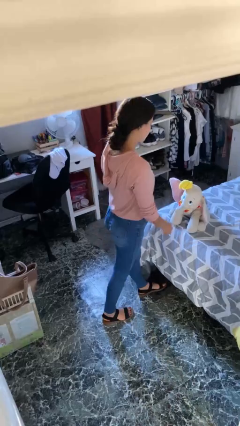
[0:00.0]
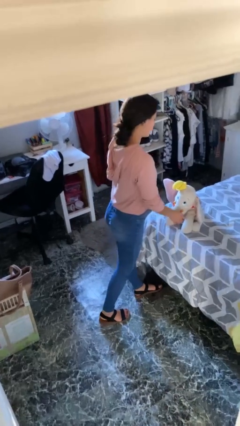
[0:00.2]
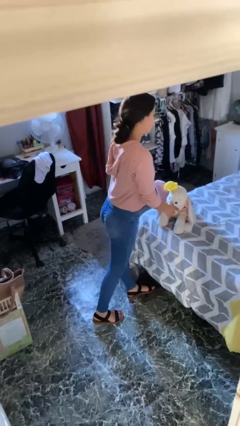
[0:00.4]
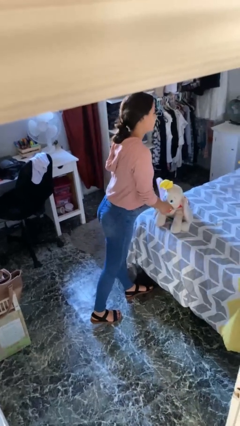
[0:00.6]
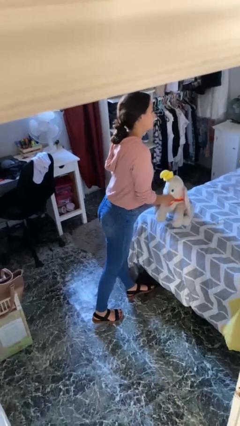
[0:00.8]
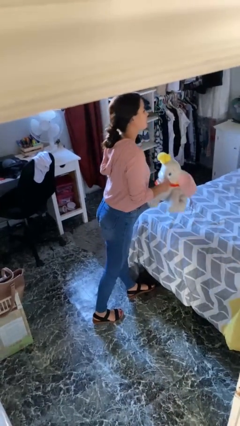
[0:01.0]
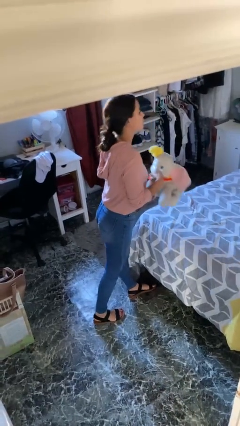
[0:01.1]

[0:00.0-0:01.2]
person picks up object from bed

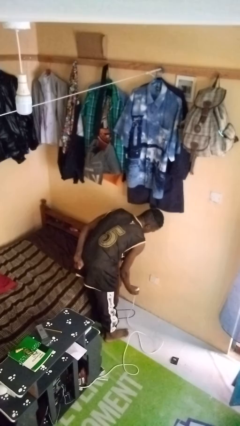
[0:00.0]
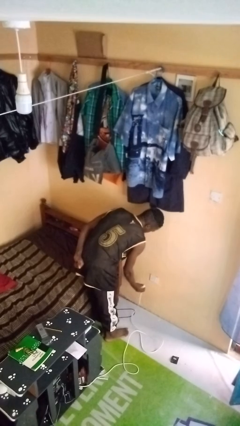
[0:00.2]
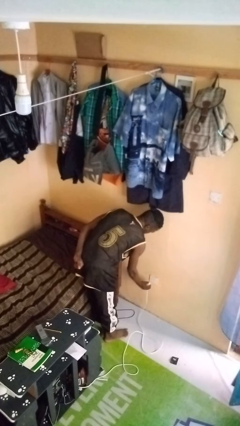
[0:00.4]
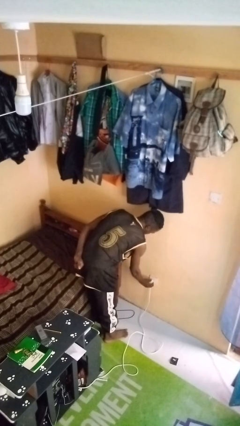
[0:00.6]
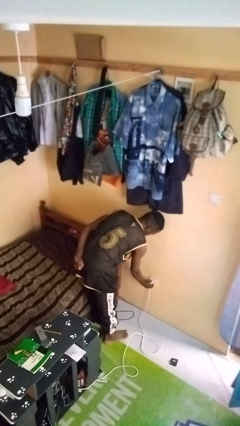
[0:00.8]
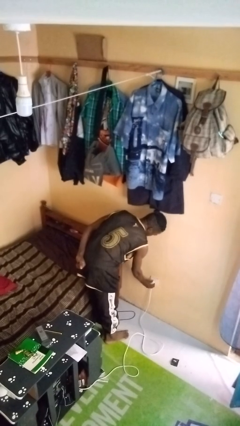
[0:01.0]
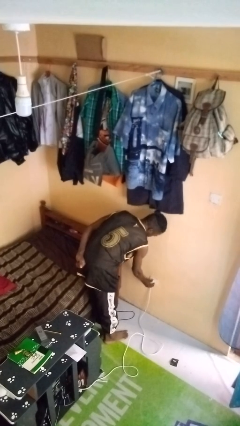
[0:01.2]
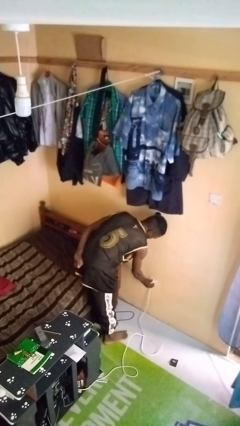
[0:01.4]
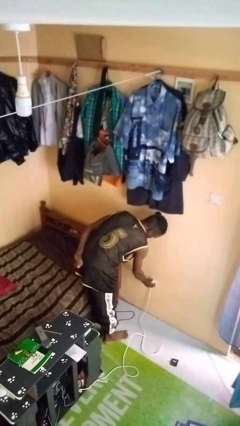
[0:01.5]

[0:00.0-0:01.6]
person plugs into electrical socket

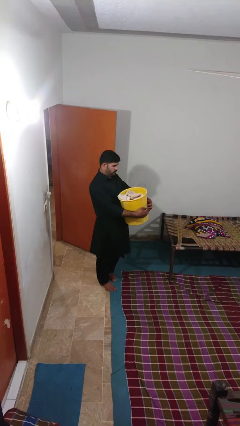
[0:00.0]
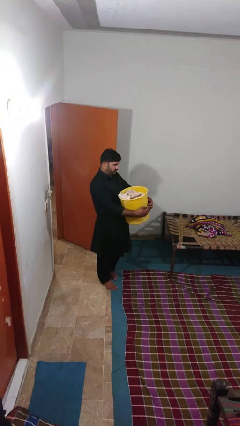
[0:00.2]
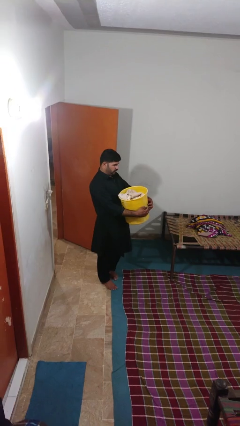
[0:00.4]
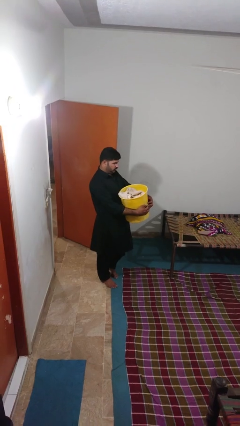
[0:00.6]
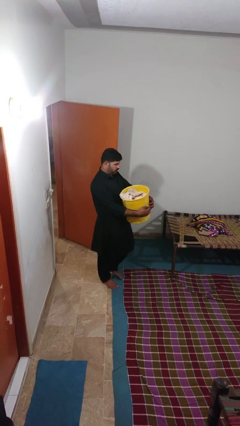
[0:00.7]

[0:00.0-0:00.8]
person carries laundry basket

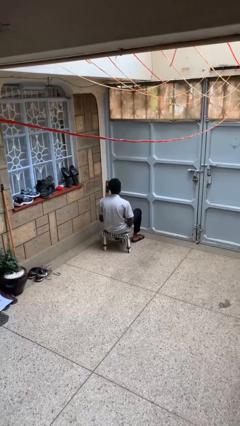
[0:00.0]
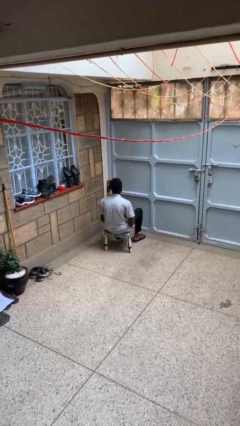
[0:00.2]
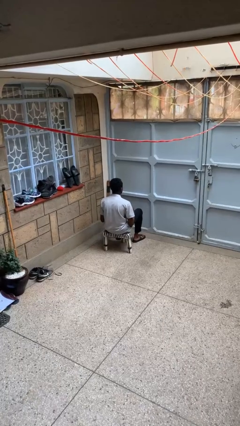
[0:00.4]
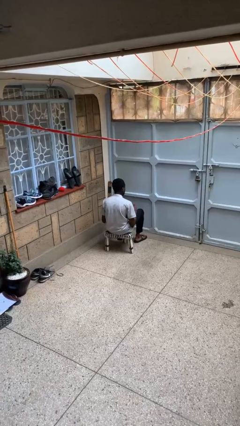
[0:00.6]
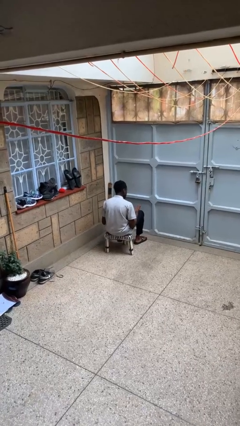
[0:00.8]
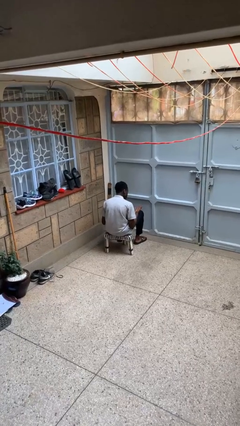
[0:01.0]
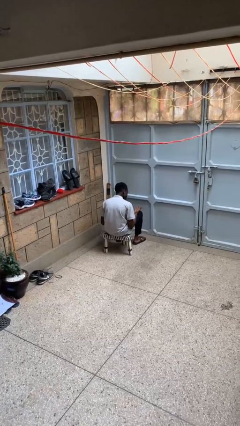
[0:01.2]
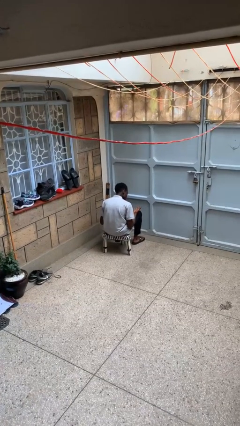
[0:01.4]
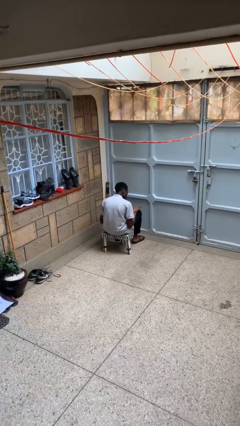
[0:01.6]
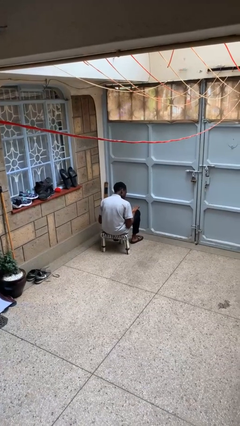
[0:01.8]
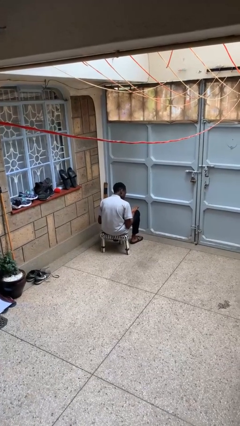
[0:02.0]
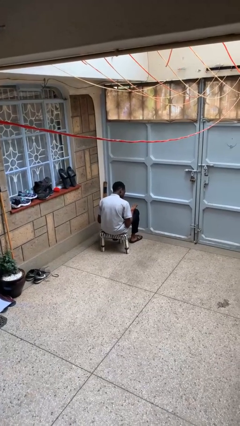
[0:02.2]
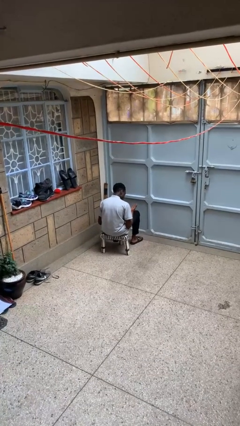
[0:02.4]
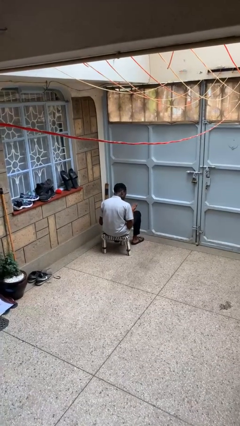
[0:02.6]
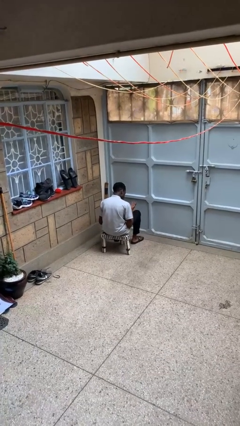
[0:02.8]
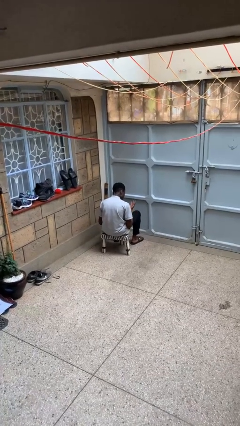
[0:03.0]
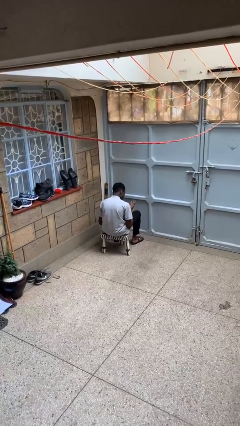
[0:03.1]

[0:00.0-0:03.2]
person looks at hands in lap

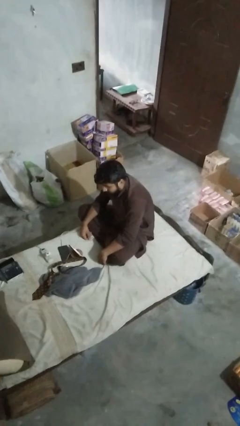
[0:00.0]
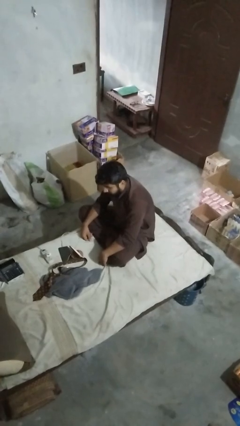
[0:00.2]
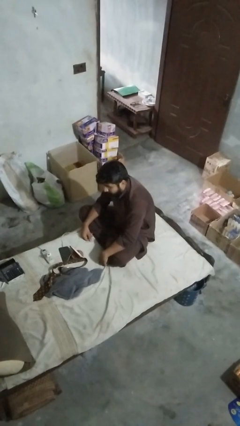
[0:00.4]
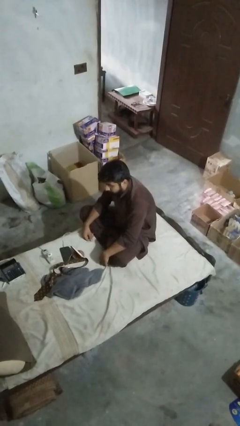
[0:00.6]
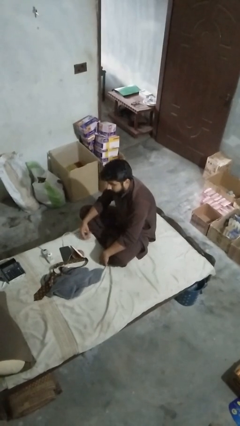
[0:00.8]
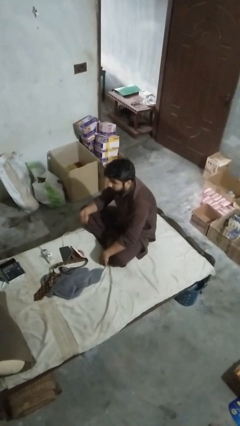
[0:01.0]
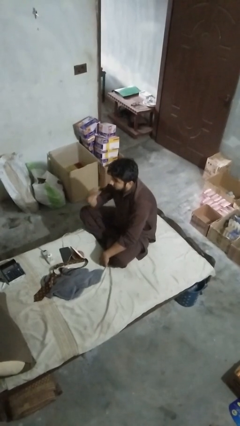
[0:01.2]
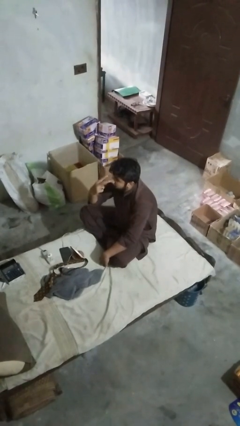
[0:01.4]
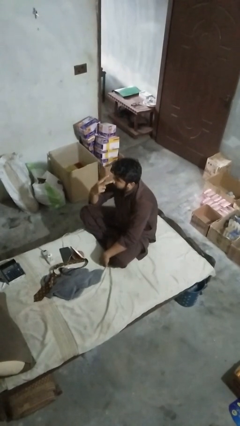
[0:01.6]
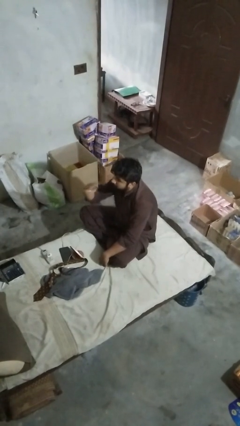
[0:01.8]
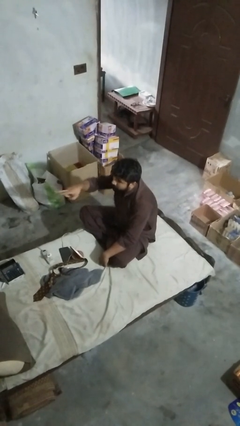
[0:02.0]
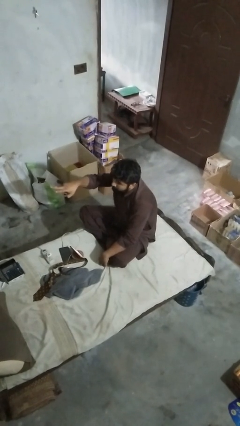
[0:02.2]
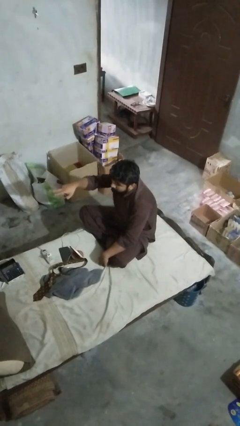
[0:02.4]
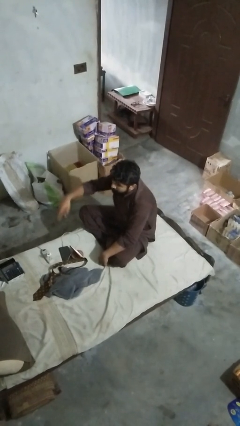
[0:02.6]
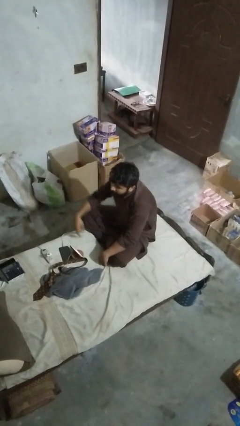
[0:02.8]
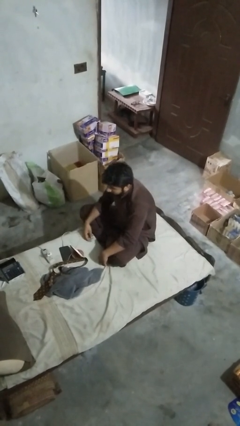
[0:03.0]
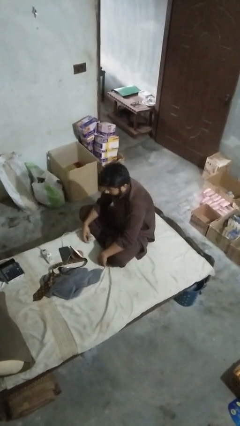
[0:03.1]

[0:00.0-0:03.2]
person gestures watch closely

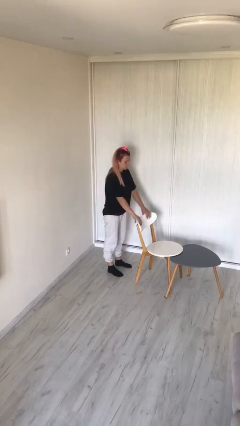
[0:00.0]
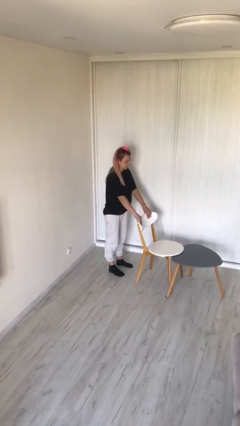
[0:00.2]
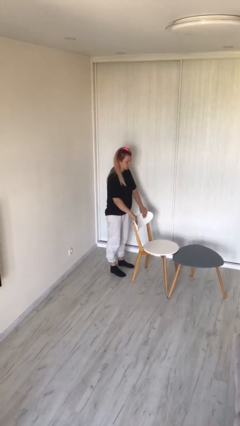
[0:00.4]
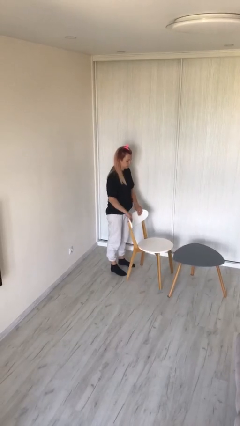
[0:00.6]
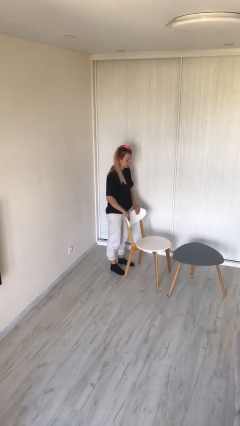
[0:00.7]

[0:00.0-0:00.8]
person pulls out chair

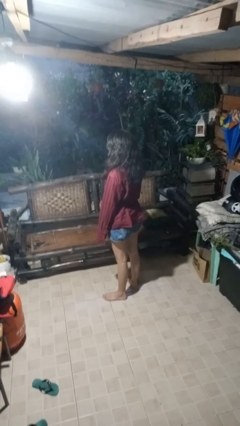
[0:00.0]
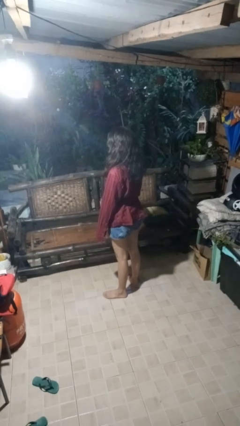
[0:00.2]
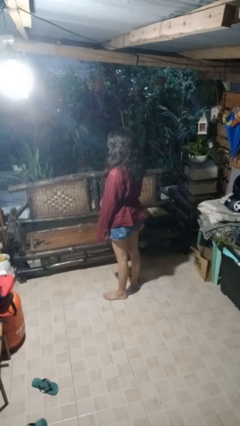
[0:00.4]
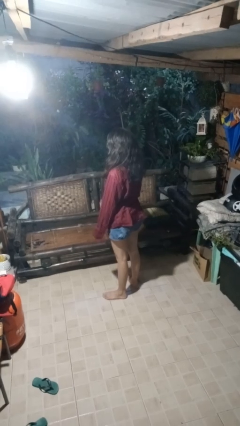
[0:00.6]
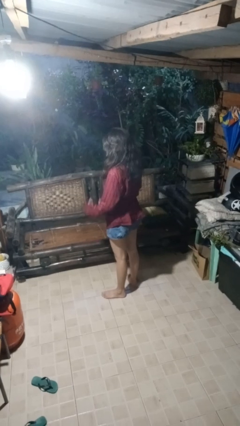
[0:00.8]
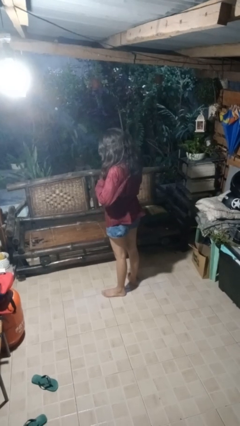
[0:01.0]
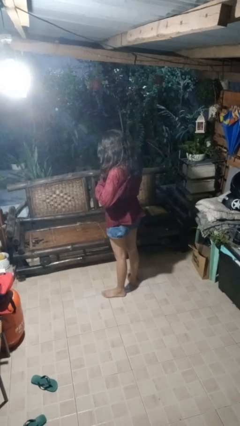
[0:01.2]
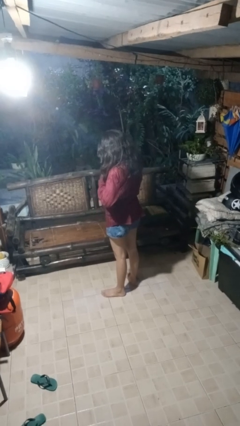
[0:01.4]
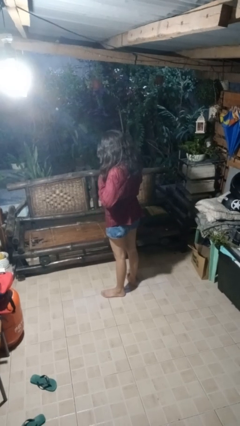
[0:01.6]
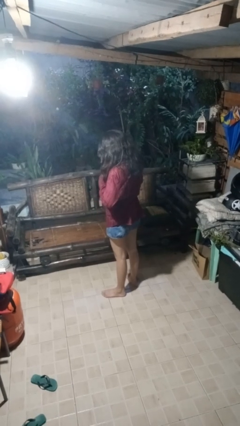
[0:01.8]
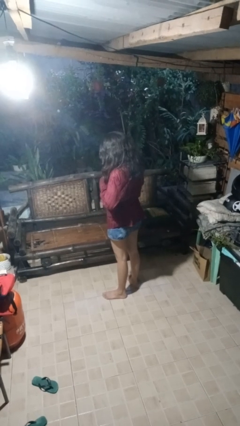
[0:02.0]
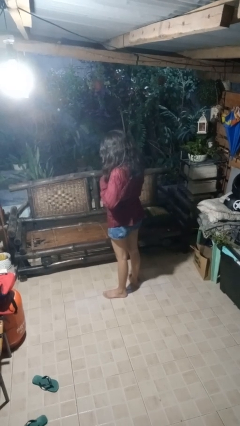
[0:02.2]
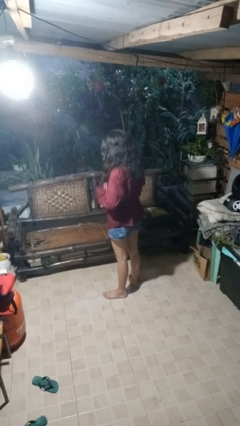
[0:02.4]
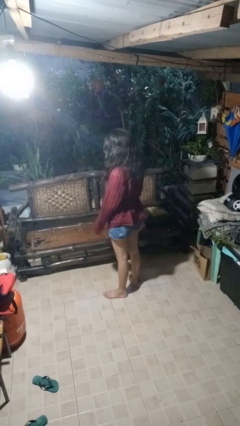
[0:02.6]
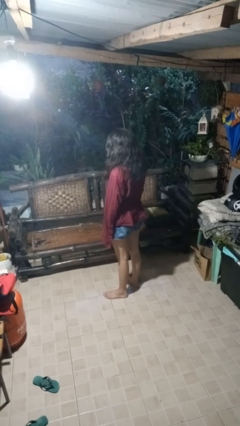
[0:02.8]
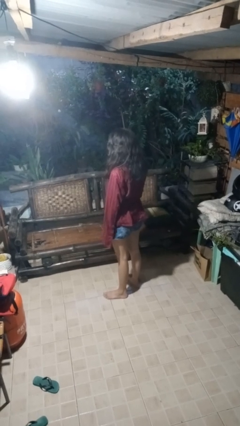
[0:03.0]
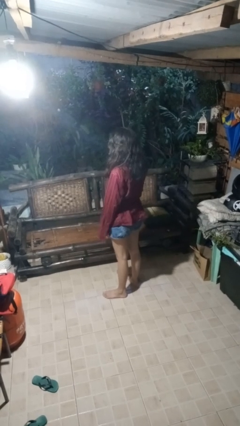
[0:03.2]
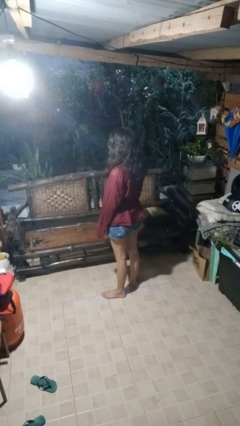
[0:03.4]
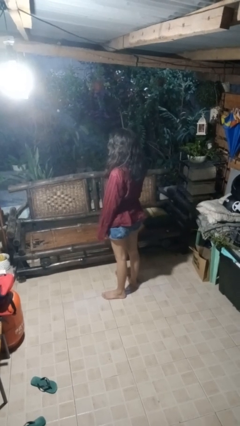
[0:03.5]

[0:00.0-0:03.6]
person unbuttons shirt

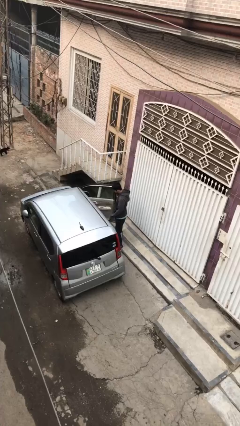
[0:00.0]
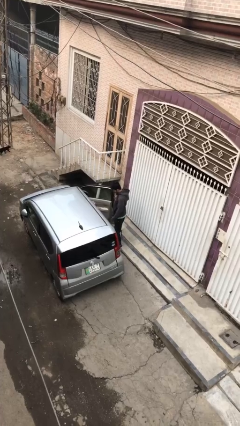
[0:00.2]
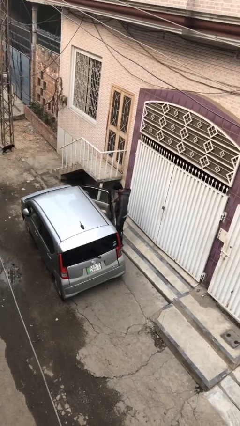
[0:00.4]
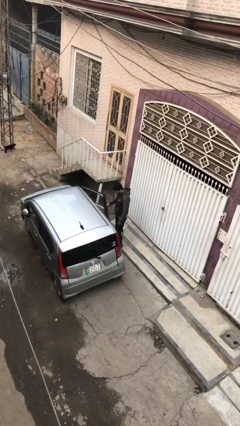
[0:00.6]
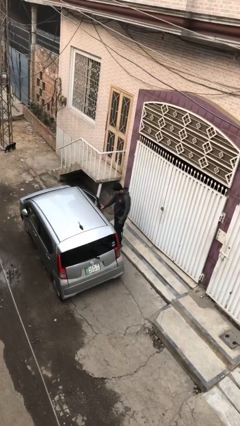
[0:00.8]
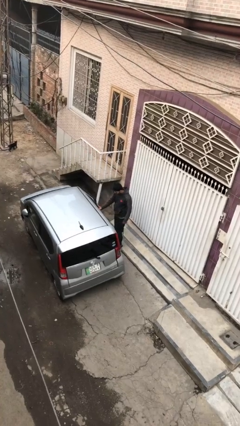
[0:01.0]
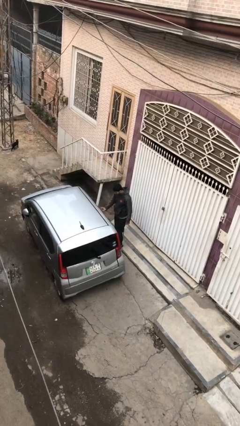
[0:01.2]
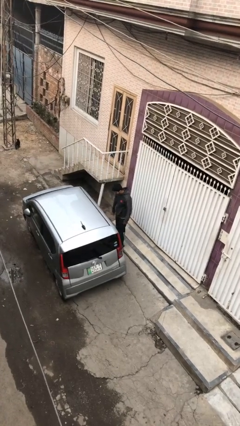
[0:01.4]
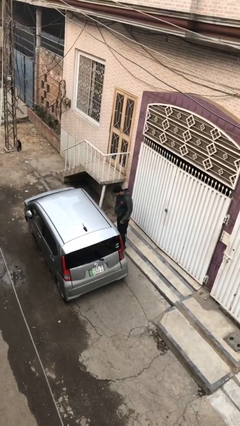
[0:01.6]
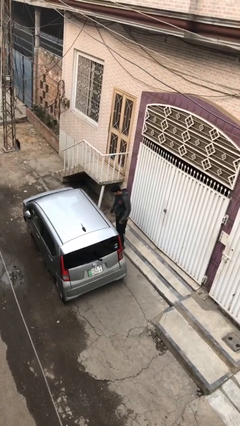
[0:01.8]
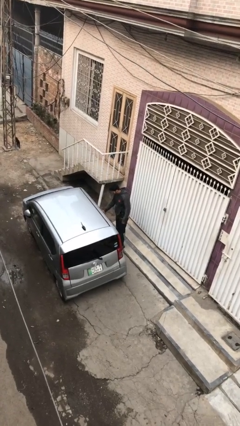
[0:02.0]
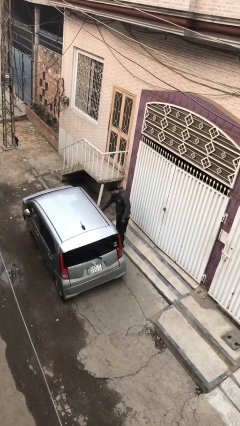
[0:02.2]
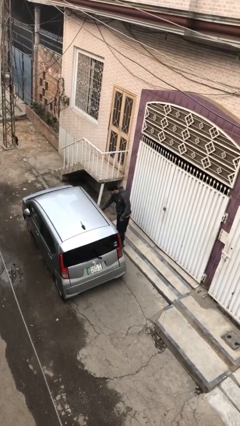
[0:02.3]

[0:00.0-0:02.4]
person closes car door

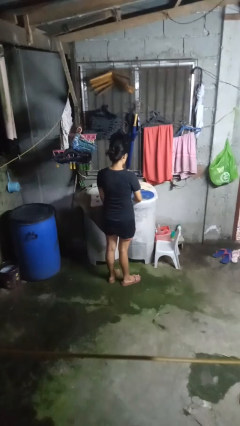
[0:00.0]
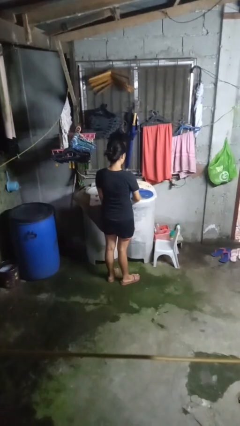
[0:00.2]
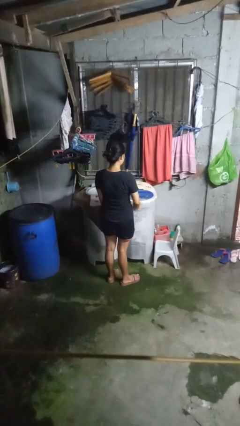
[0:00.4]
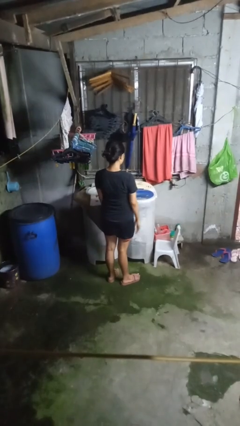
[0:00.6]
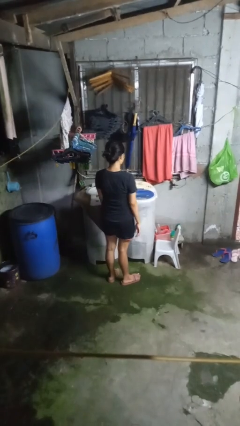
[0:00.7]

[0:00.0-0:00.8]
person closes clothes washer
